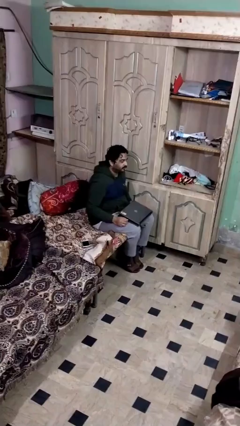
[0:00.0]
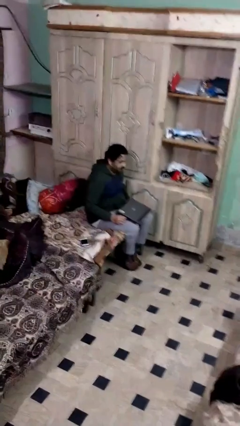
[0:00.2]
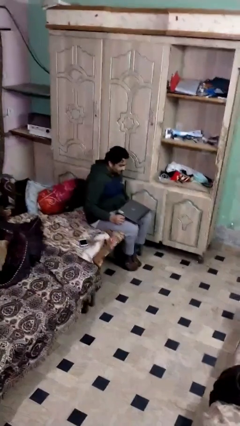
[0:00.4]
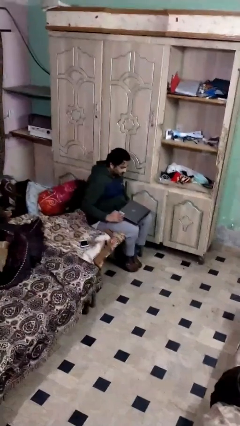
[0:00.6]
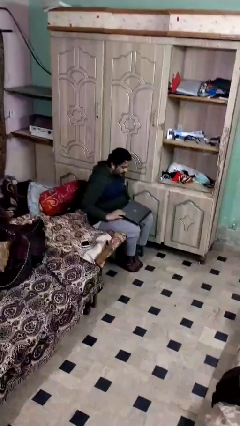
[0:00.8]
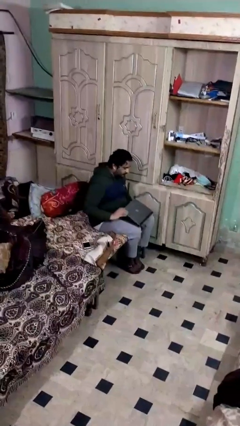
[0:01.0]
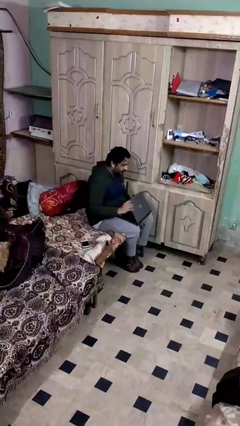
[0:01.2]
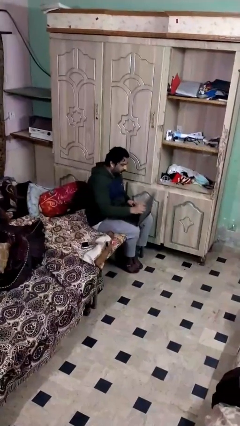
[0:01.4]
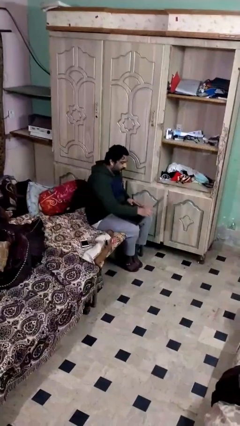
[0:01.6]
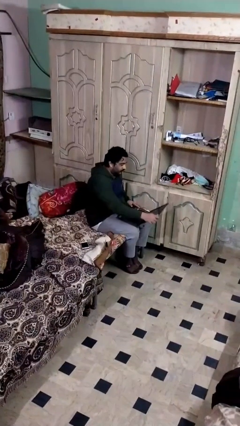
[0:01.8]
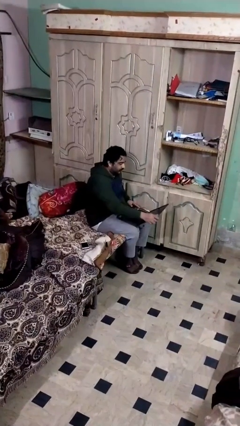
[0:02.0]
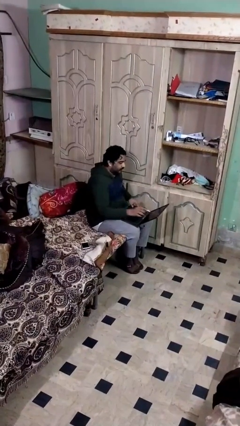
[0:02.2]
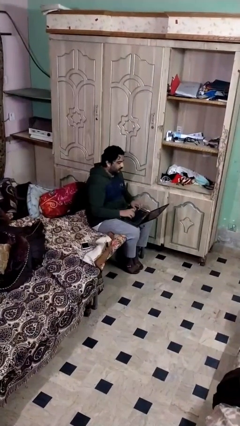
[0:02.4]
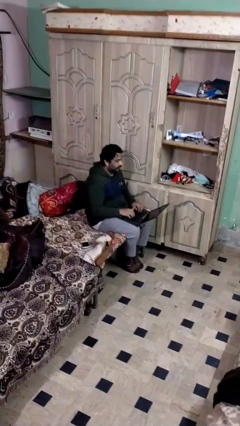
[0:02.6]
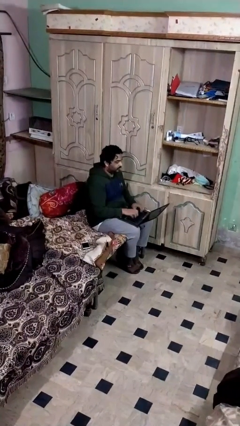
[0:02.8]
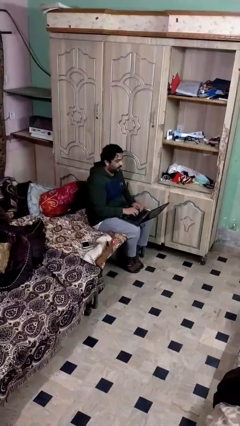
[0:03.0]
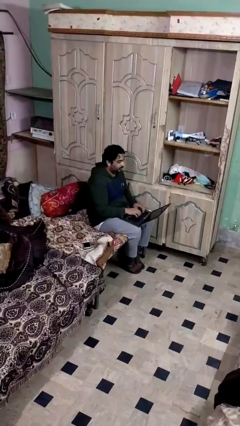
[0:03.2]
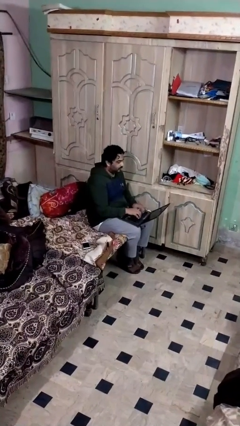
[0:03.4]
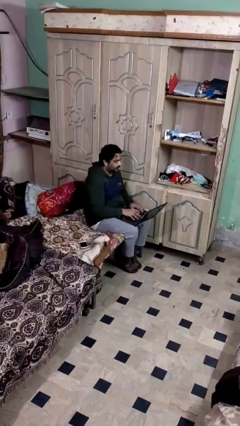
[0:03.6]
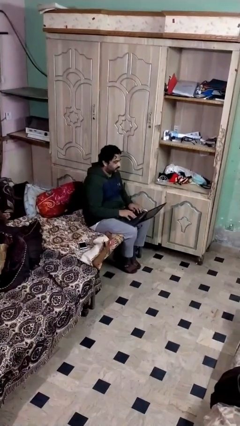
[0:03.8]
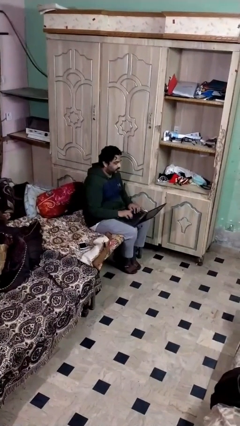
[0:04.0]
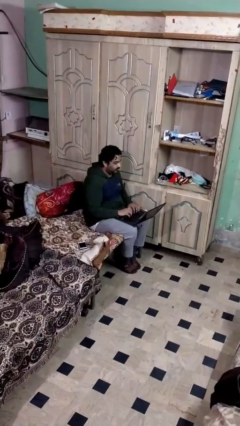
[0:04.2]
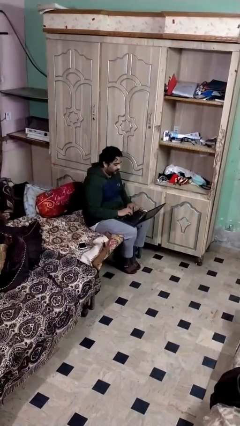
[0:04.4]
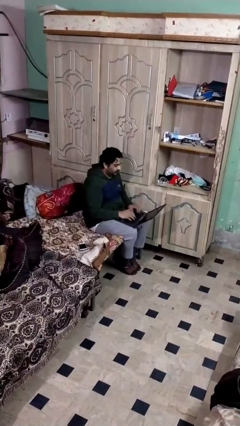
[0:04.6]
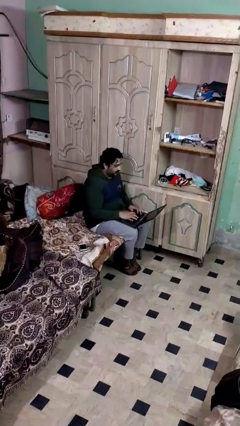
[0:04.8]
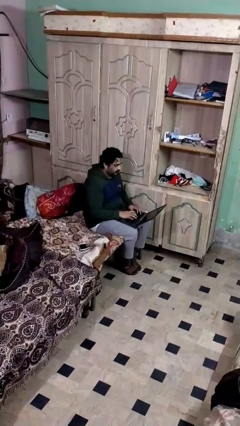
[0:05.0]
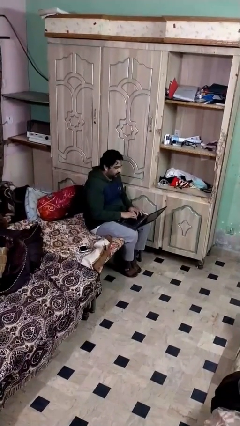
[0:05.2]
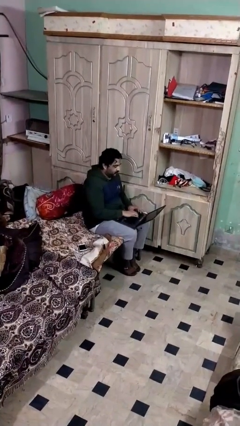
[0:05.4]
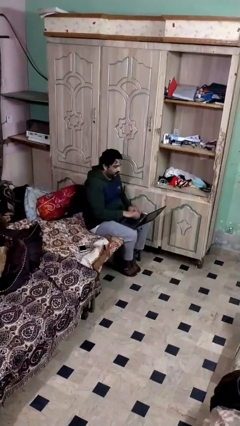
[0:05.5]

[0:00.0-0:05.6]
person interacts with laptop

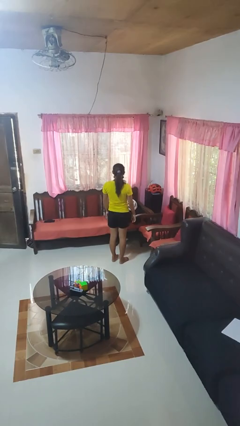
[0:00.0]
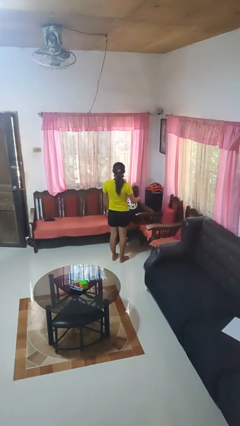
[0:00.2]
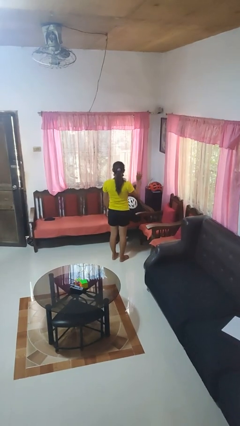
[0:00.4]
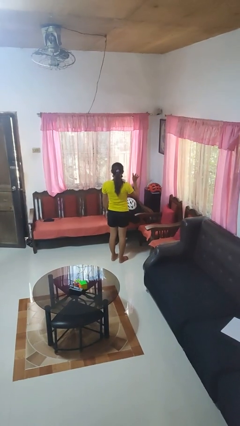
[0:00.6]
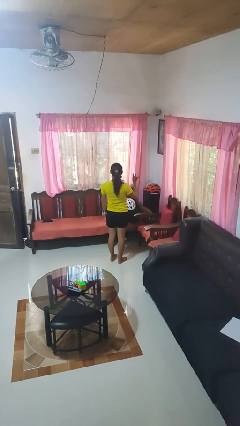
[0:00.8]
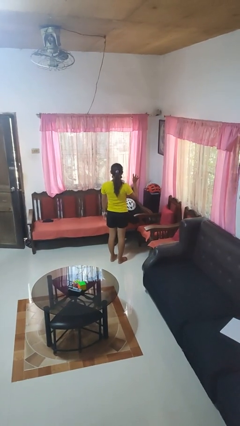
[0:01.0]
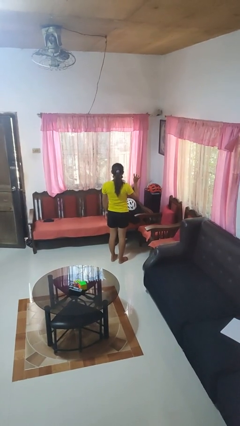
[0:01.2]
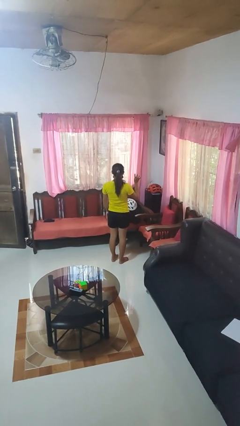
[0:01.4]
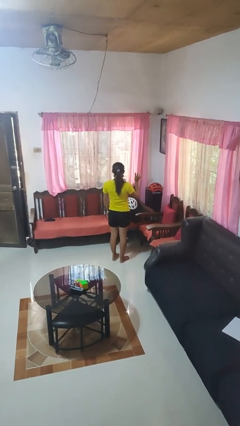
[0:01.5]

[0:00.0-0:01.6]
person gestures number four

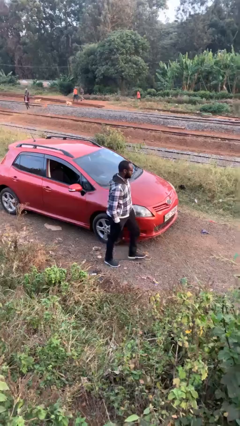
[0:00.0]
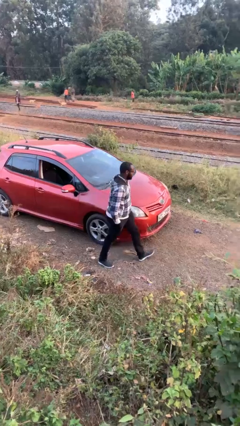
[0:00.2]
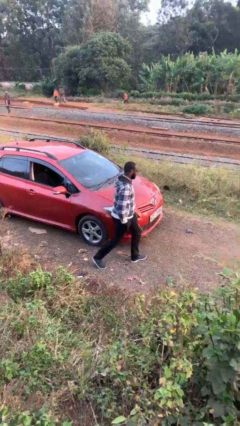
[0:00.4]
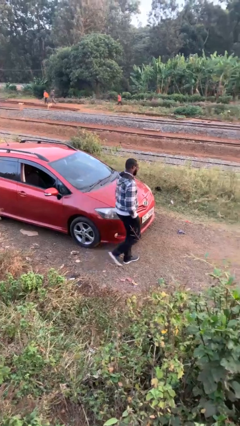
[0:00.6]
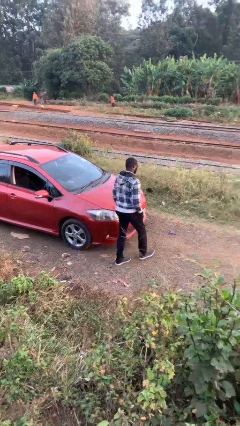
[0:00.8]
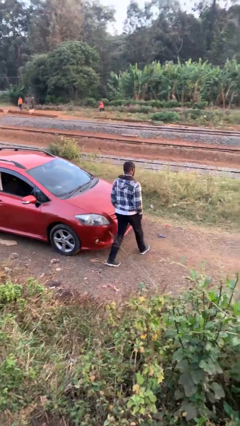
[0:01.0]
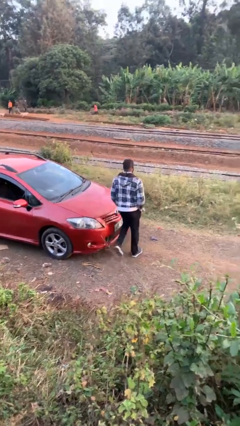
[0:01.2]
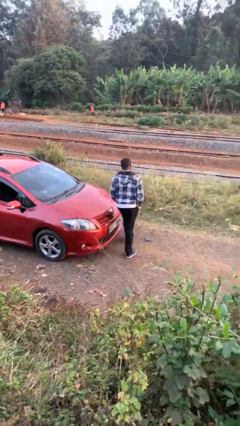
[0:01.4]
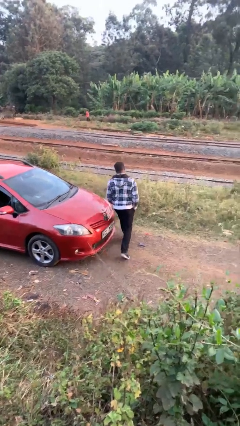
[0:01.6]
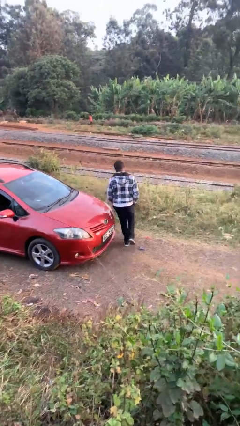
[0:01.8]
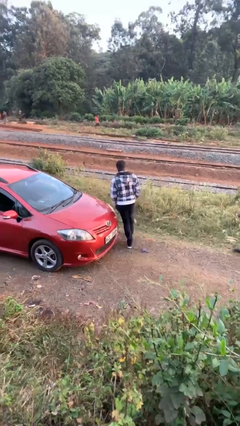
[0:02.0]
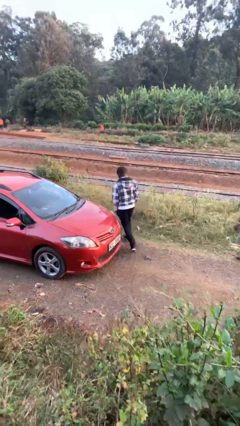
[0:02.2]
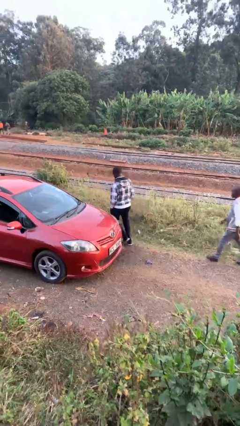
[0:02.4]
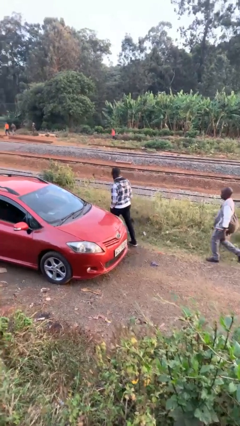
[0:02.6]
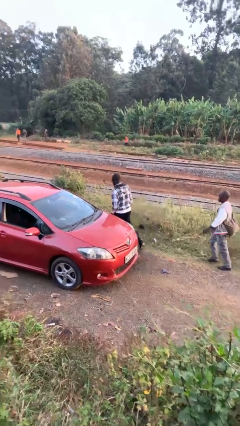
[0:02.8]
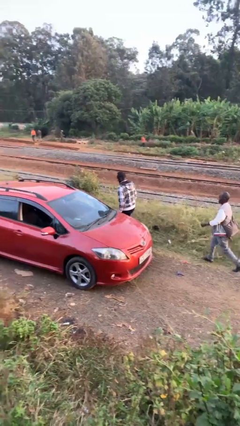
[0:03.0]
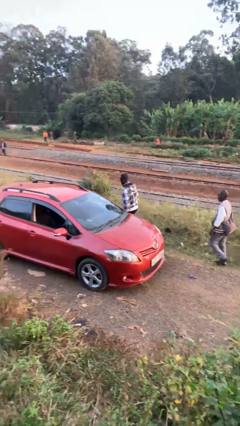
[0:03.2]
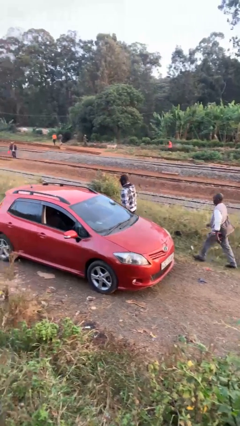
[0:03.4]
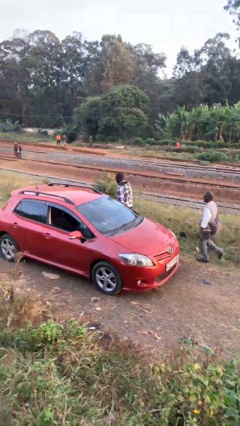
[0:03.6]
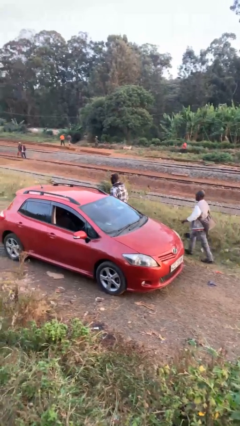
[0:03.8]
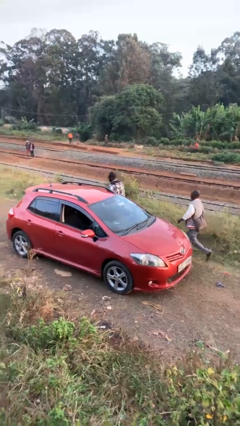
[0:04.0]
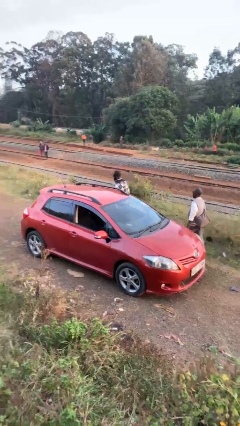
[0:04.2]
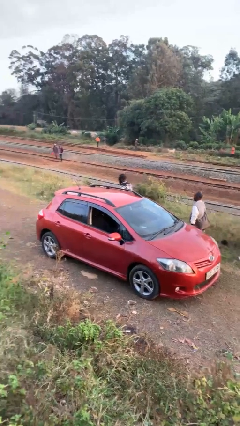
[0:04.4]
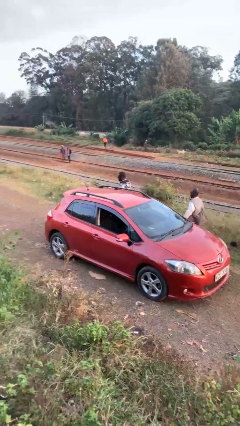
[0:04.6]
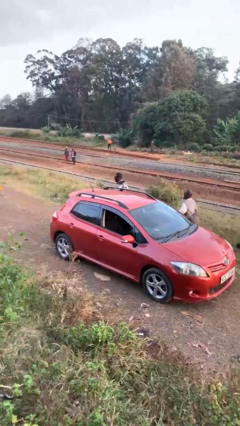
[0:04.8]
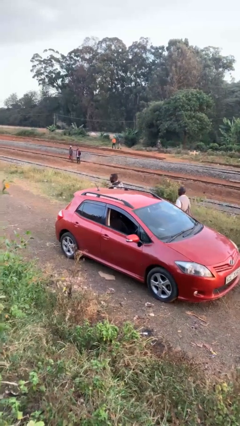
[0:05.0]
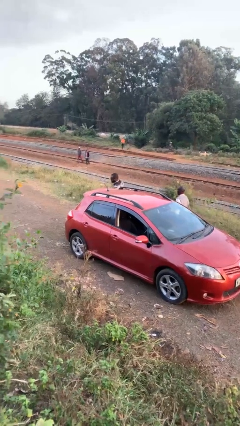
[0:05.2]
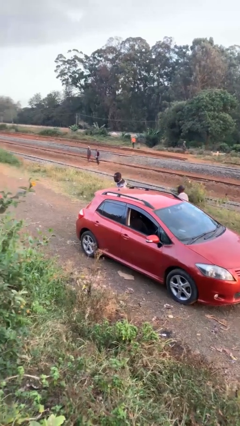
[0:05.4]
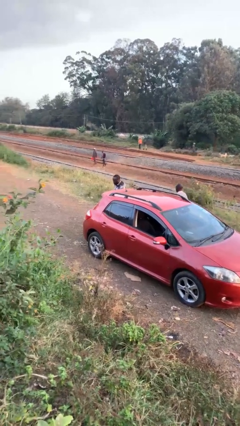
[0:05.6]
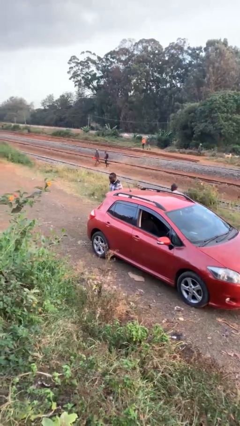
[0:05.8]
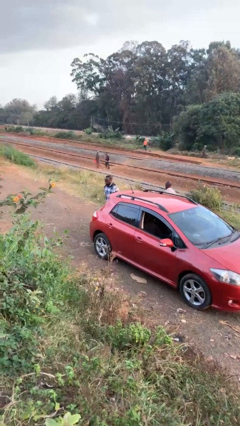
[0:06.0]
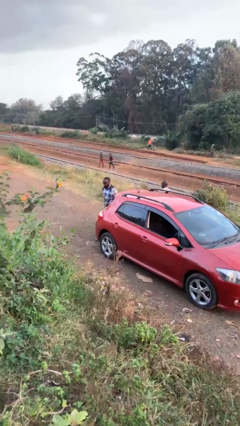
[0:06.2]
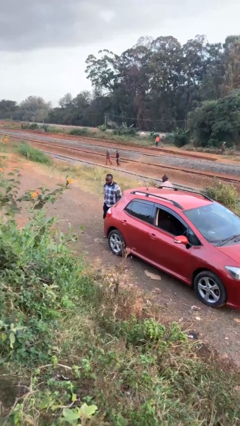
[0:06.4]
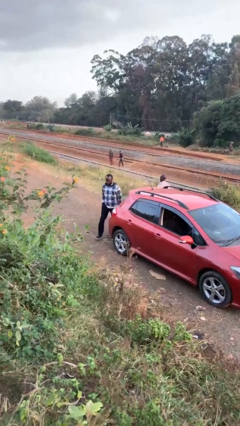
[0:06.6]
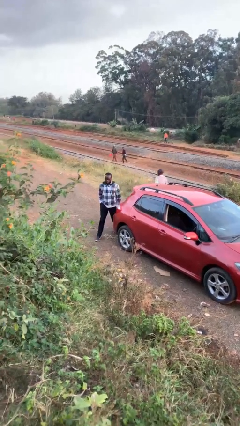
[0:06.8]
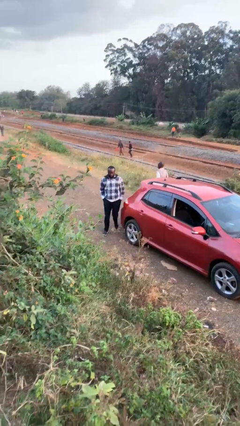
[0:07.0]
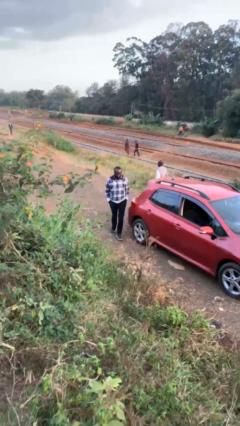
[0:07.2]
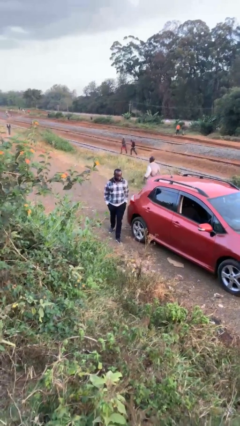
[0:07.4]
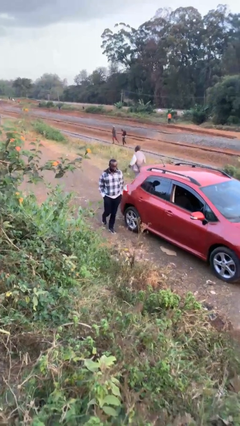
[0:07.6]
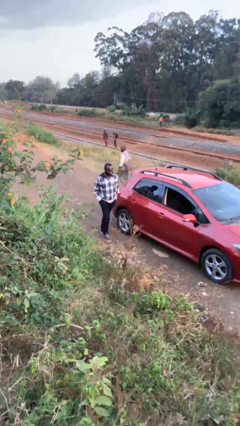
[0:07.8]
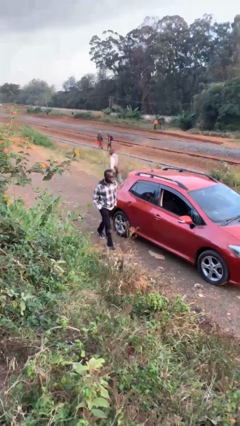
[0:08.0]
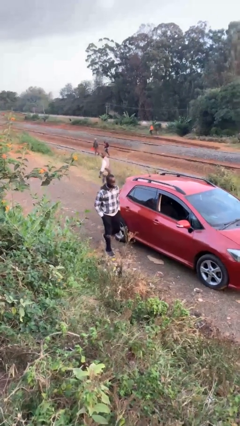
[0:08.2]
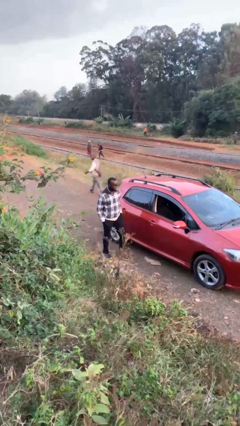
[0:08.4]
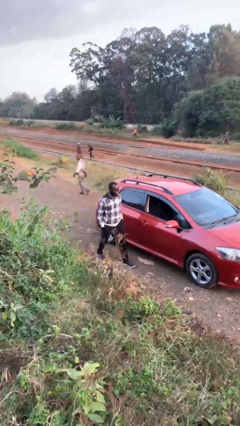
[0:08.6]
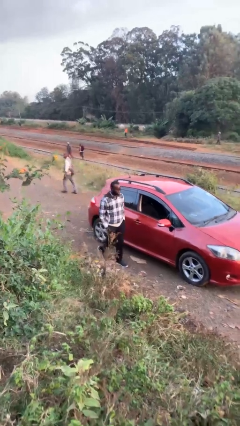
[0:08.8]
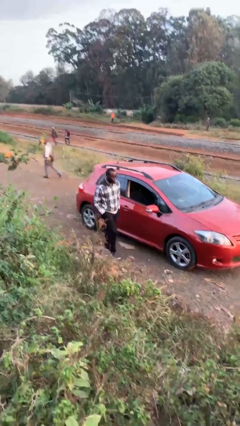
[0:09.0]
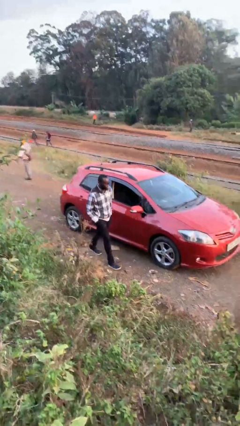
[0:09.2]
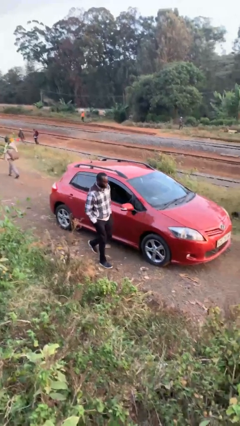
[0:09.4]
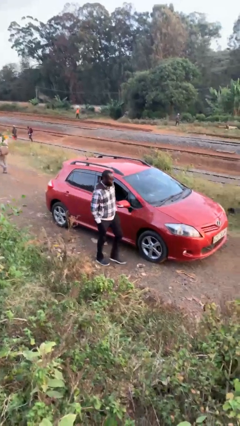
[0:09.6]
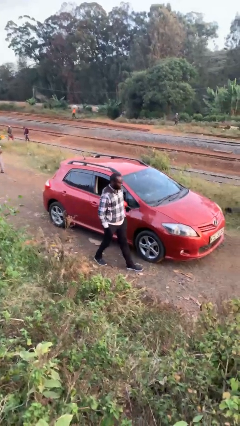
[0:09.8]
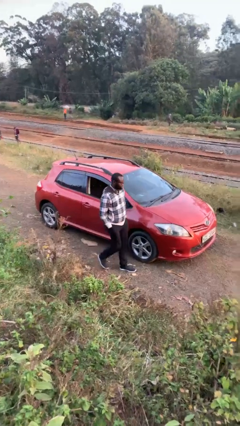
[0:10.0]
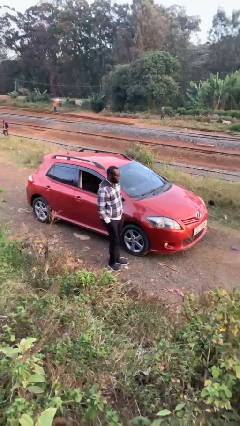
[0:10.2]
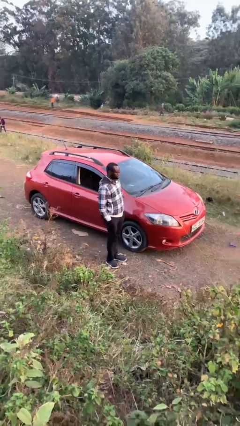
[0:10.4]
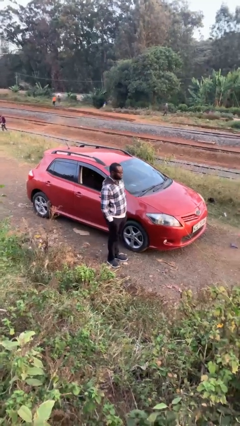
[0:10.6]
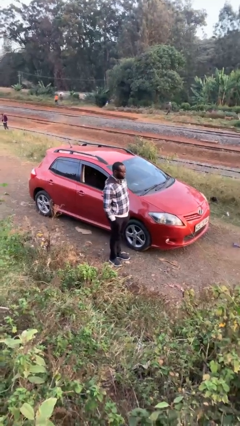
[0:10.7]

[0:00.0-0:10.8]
person walks around car
